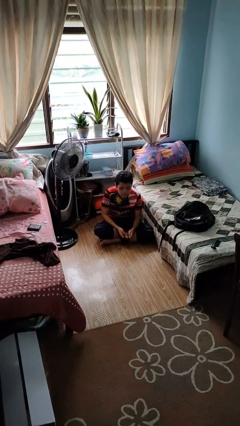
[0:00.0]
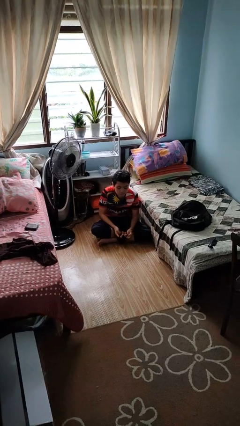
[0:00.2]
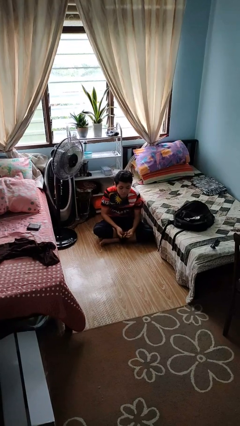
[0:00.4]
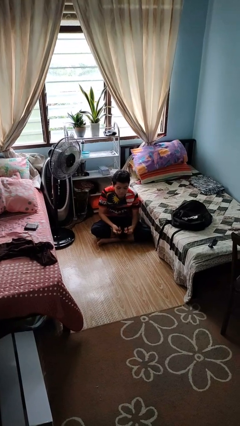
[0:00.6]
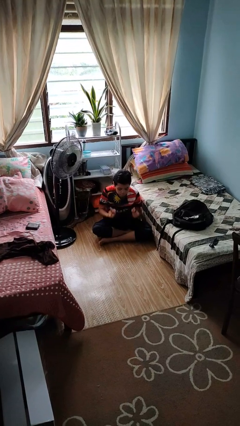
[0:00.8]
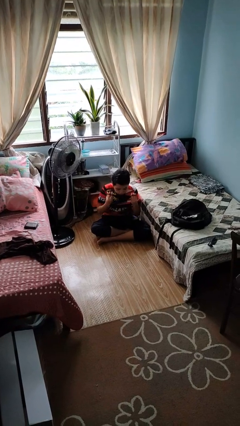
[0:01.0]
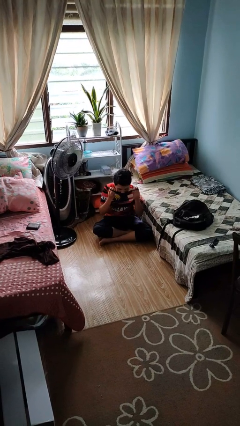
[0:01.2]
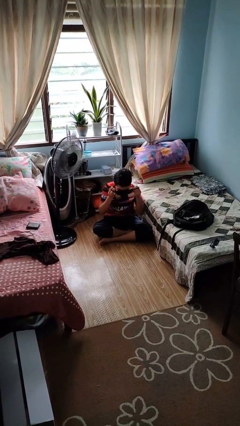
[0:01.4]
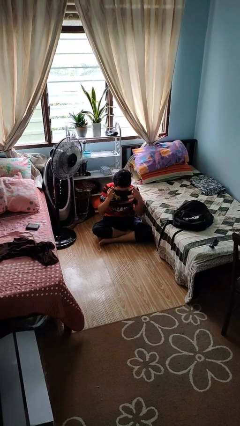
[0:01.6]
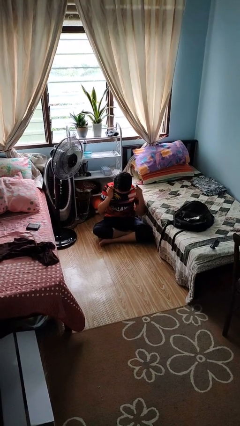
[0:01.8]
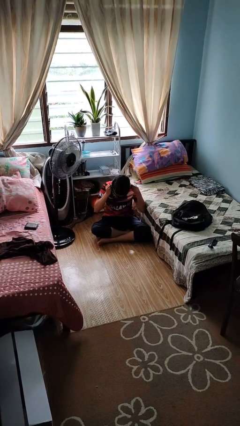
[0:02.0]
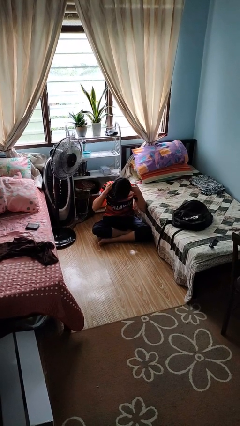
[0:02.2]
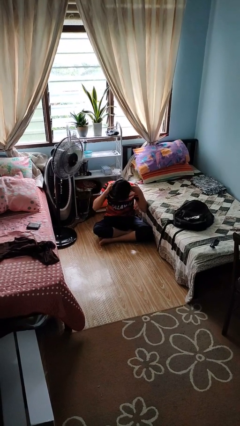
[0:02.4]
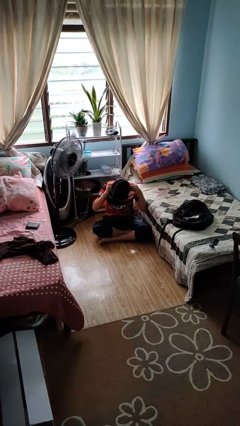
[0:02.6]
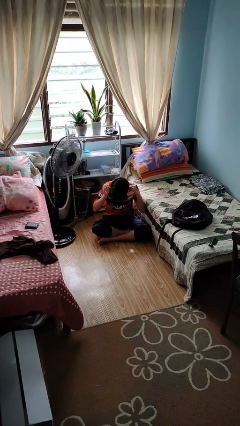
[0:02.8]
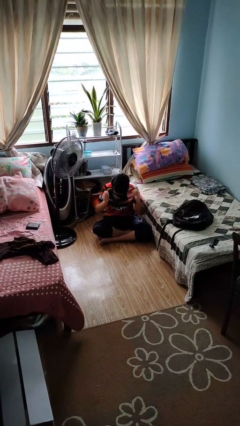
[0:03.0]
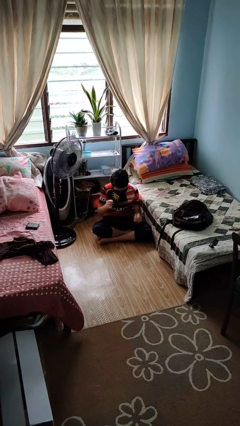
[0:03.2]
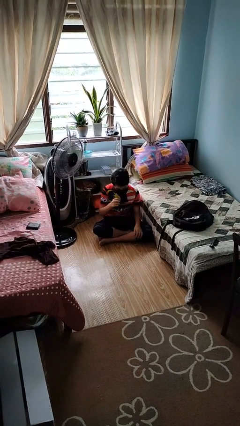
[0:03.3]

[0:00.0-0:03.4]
person puts on facemask

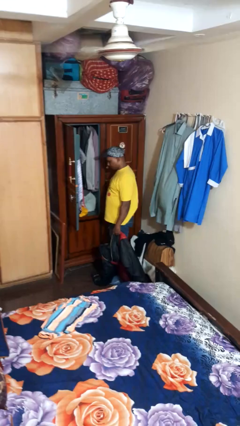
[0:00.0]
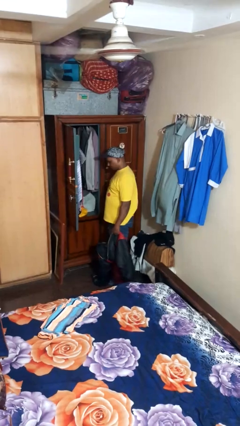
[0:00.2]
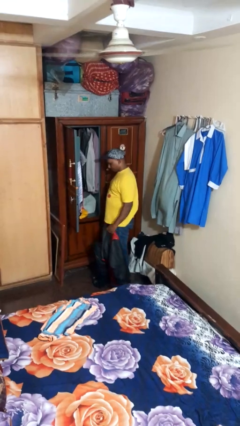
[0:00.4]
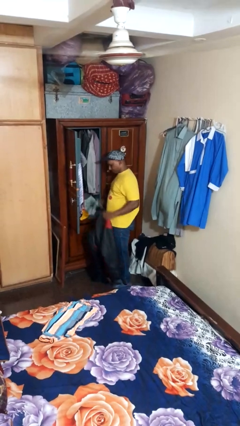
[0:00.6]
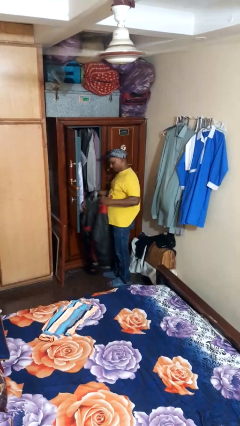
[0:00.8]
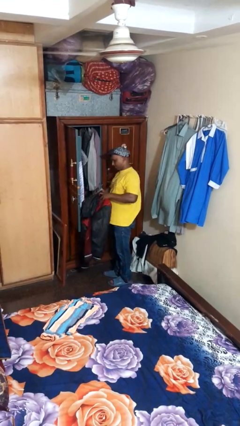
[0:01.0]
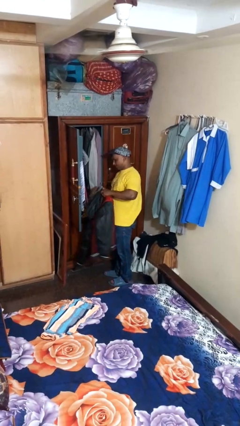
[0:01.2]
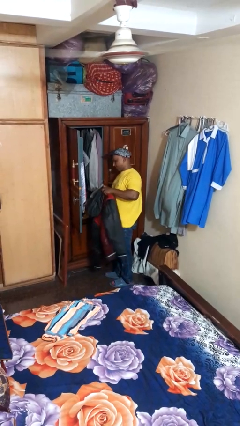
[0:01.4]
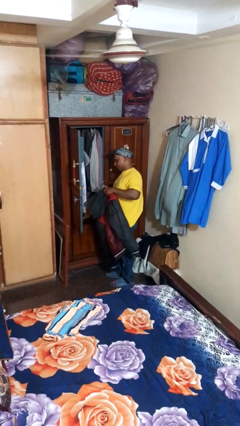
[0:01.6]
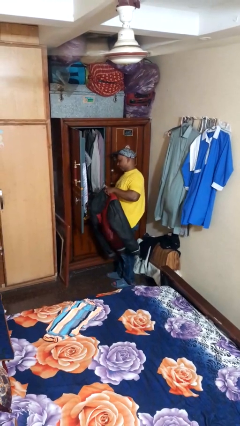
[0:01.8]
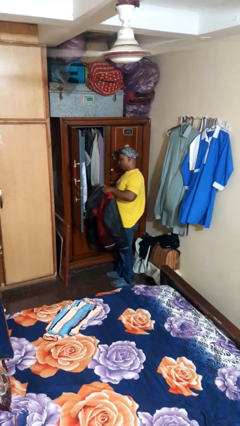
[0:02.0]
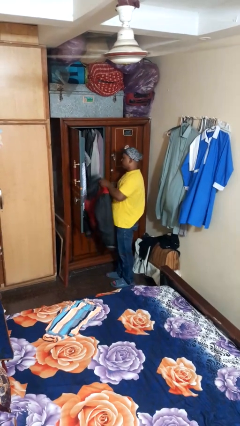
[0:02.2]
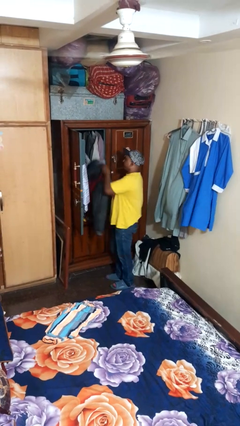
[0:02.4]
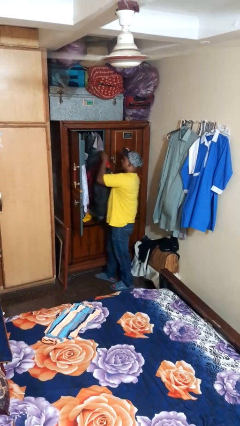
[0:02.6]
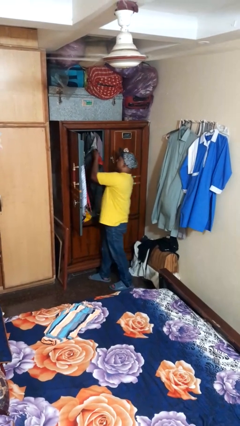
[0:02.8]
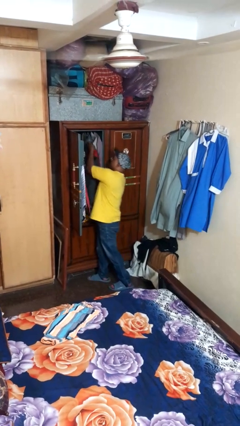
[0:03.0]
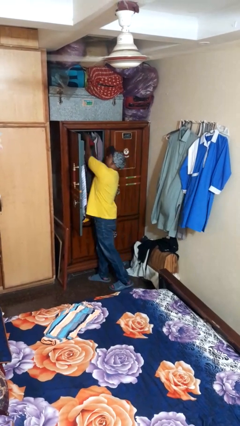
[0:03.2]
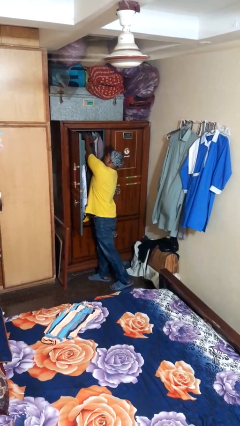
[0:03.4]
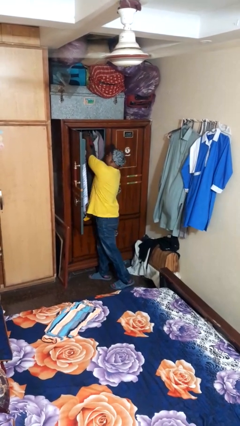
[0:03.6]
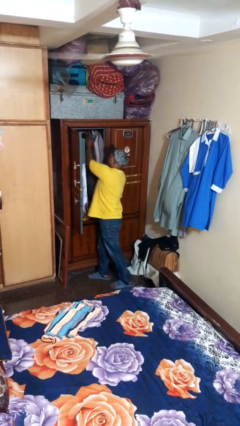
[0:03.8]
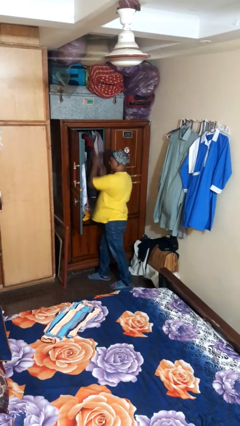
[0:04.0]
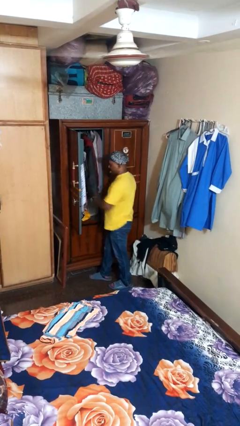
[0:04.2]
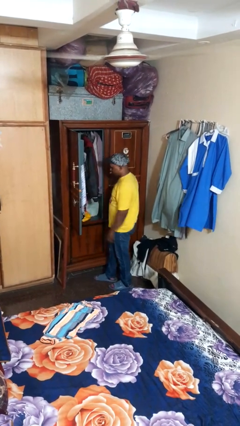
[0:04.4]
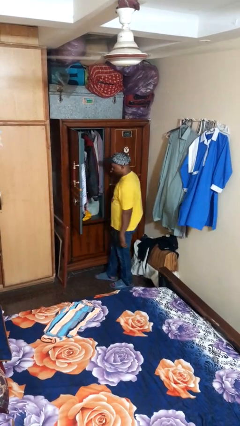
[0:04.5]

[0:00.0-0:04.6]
person puts clothes into closet

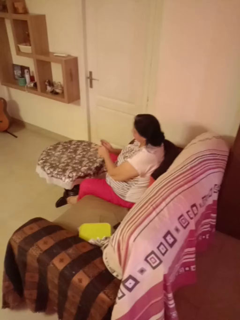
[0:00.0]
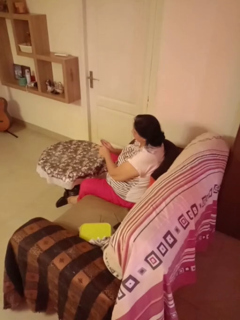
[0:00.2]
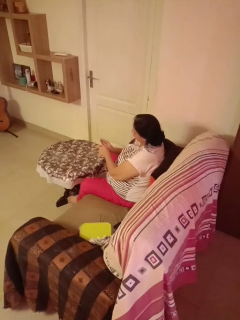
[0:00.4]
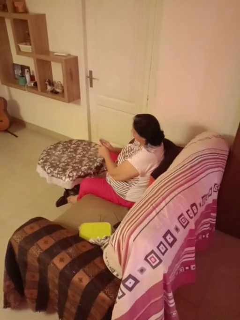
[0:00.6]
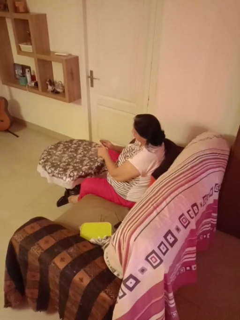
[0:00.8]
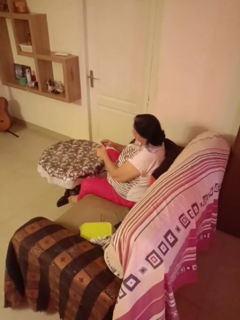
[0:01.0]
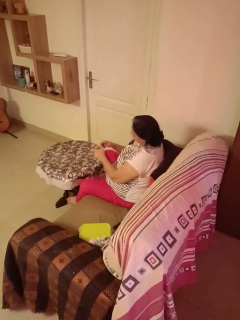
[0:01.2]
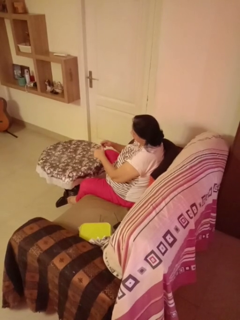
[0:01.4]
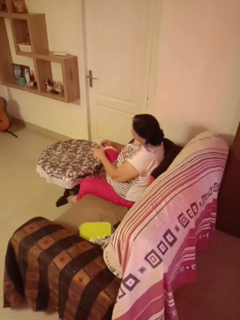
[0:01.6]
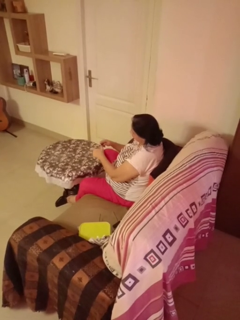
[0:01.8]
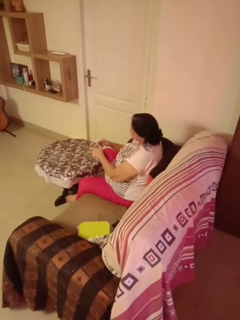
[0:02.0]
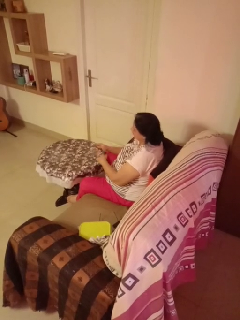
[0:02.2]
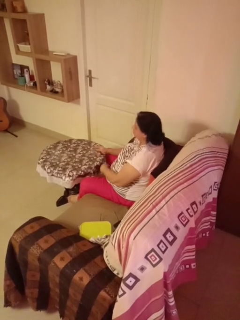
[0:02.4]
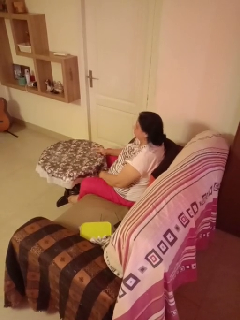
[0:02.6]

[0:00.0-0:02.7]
person files fingernails

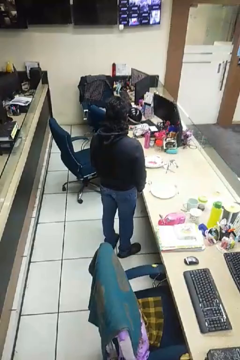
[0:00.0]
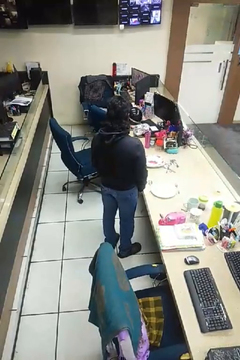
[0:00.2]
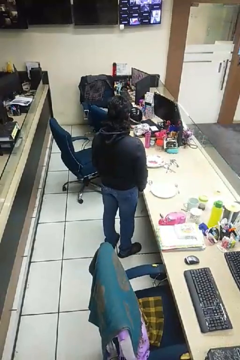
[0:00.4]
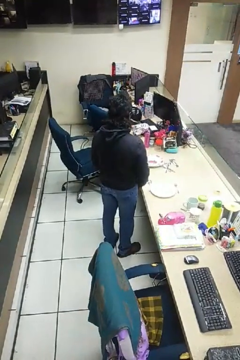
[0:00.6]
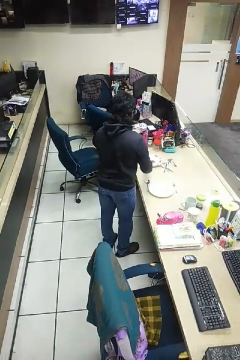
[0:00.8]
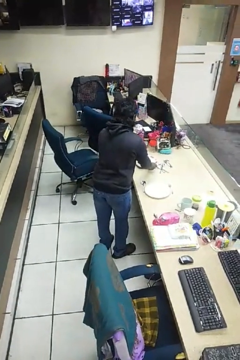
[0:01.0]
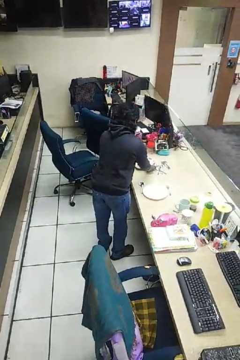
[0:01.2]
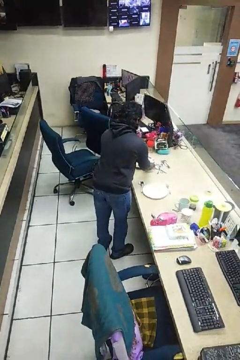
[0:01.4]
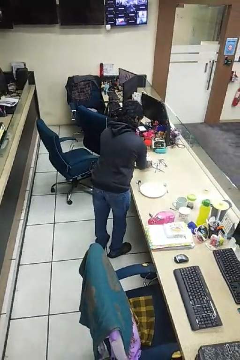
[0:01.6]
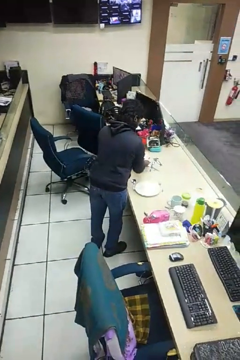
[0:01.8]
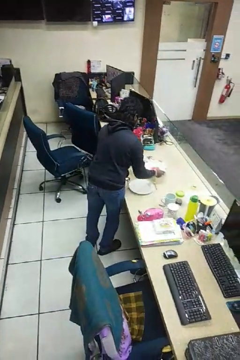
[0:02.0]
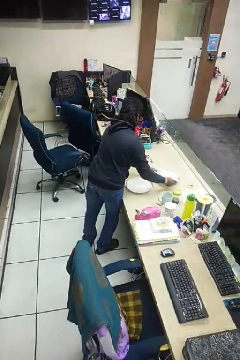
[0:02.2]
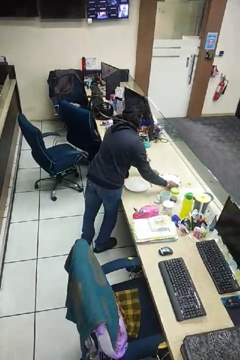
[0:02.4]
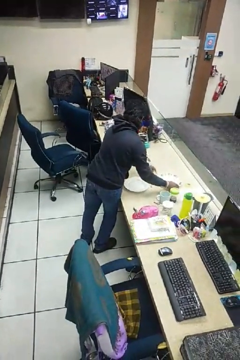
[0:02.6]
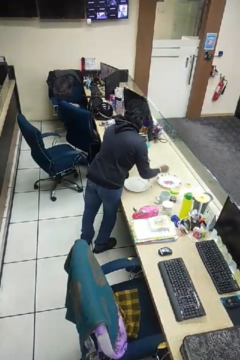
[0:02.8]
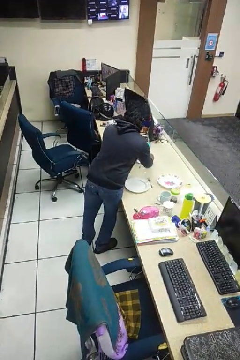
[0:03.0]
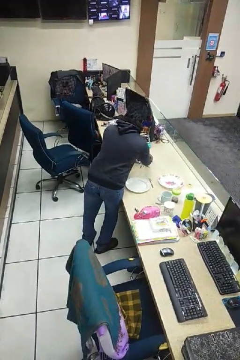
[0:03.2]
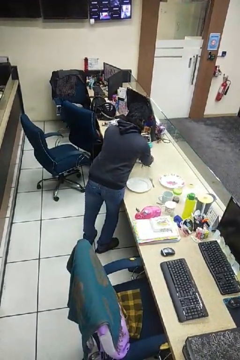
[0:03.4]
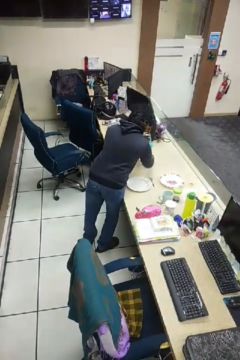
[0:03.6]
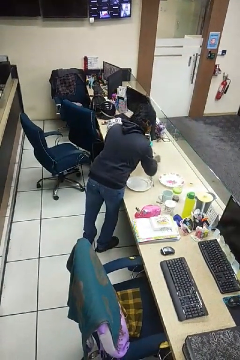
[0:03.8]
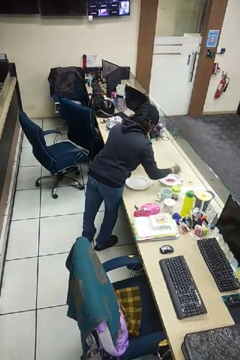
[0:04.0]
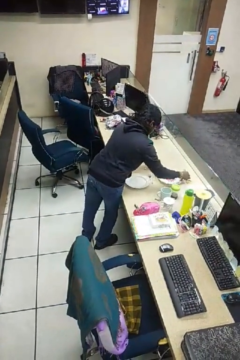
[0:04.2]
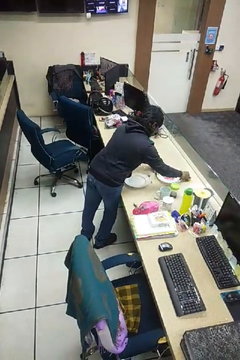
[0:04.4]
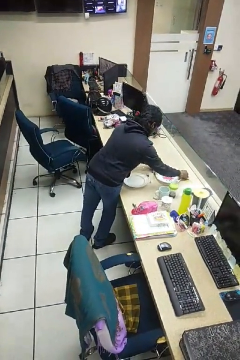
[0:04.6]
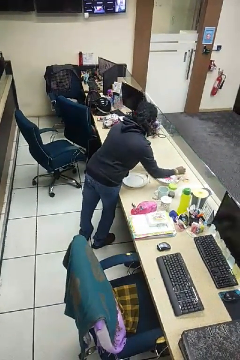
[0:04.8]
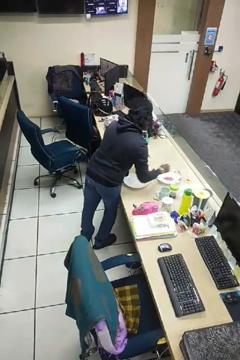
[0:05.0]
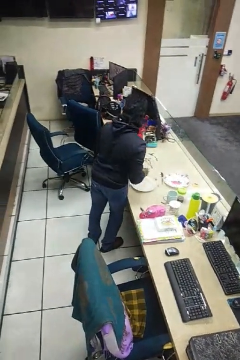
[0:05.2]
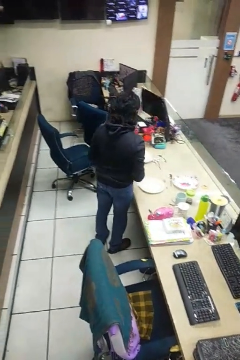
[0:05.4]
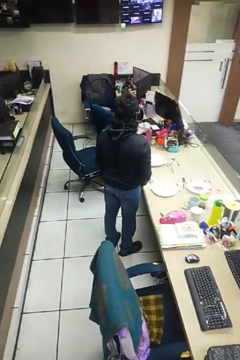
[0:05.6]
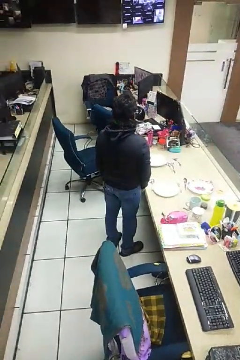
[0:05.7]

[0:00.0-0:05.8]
person sets table

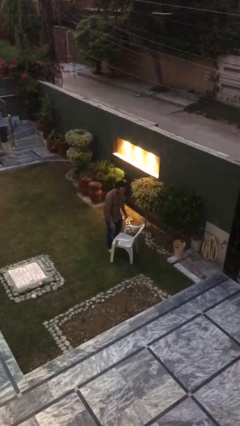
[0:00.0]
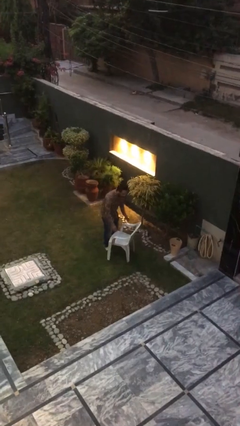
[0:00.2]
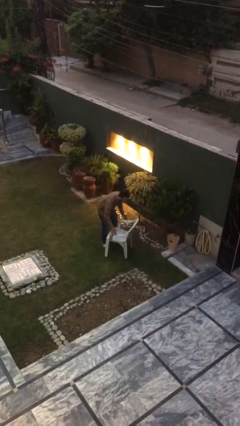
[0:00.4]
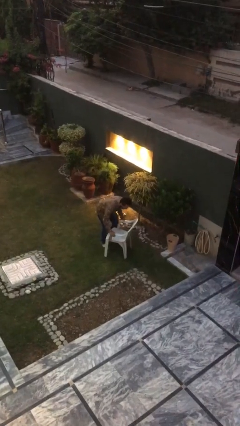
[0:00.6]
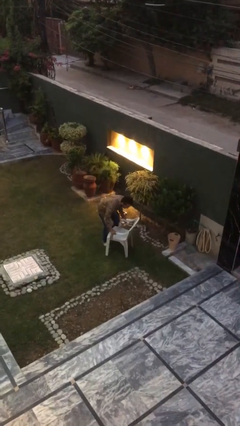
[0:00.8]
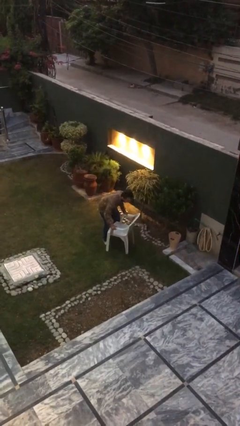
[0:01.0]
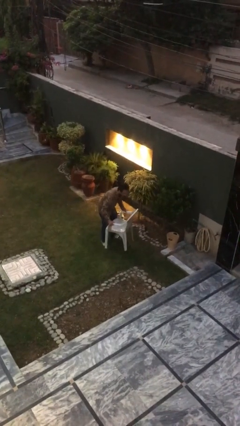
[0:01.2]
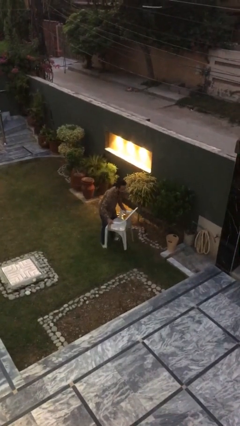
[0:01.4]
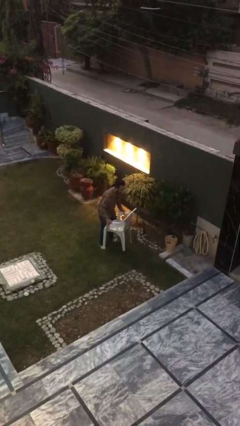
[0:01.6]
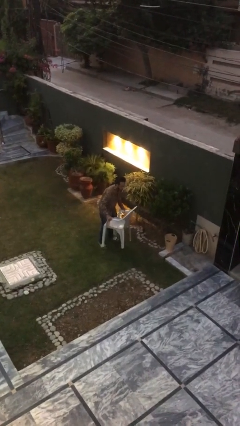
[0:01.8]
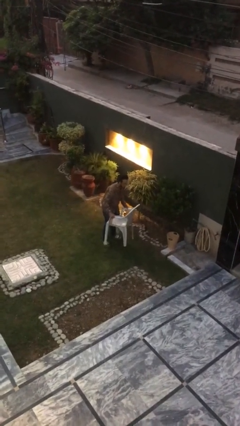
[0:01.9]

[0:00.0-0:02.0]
person picks up object from floor

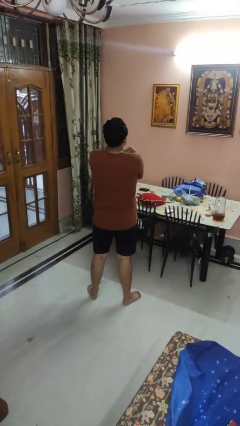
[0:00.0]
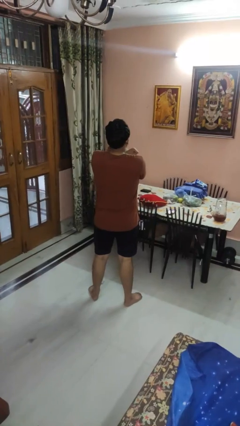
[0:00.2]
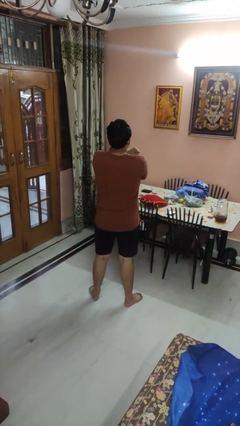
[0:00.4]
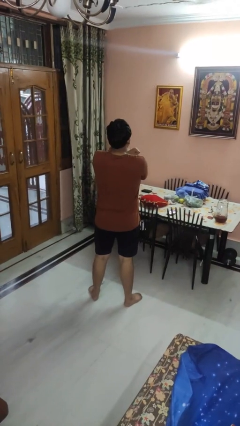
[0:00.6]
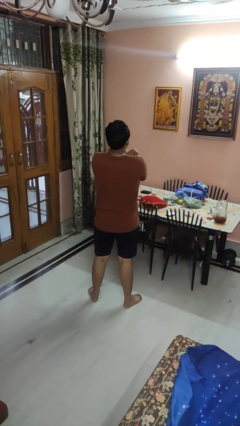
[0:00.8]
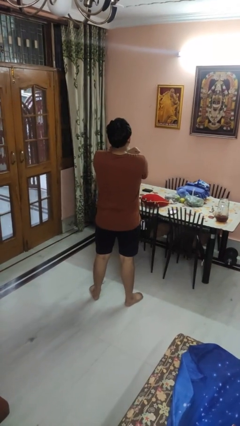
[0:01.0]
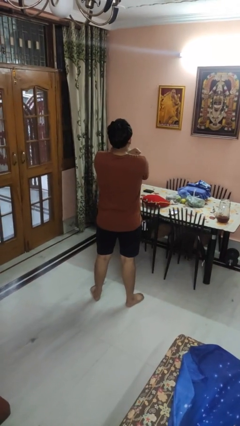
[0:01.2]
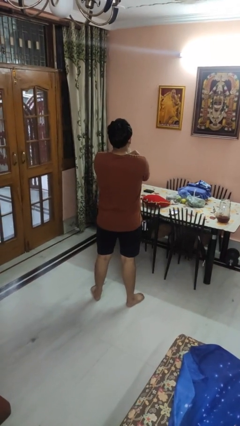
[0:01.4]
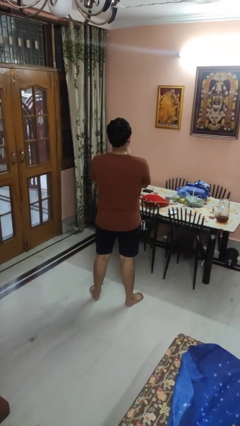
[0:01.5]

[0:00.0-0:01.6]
person gestures arms x
